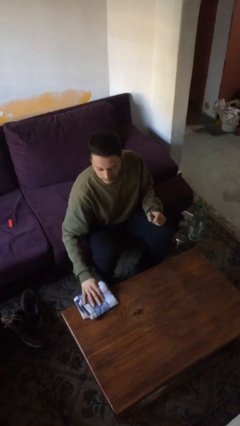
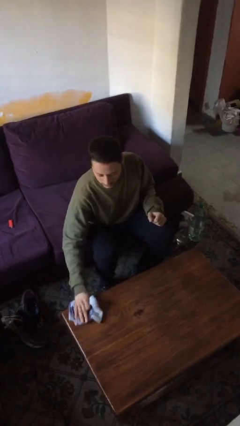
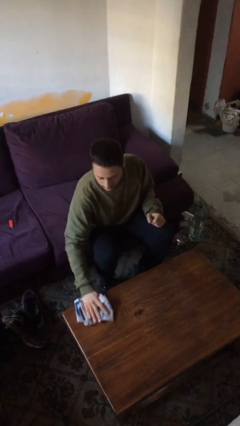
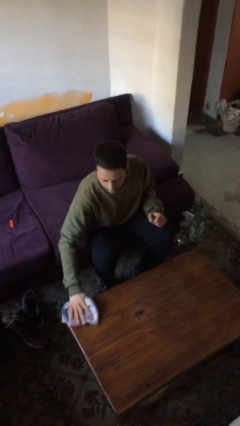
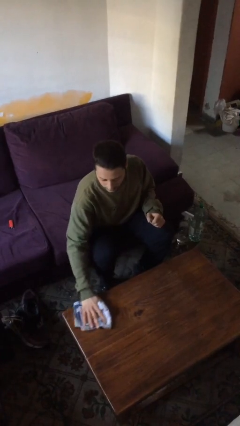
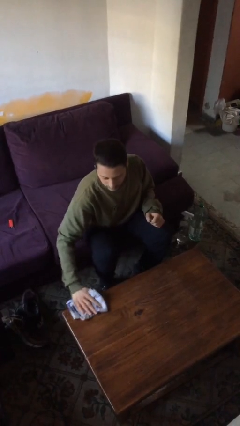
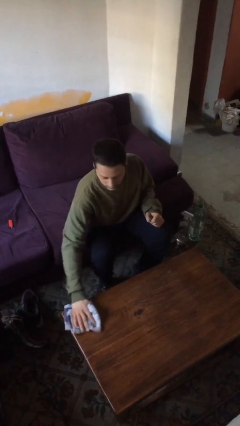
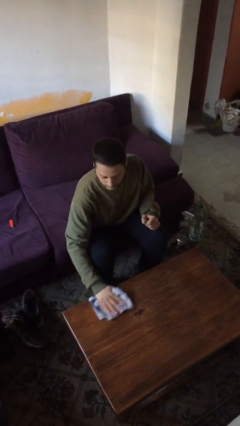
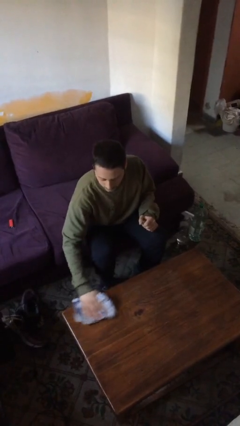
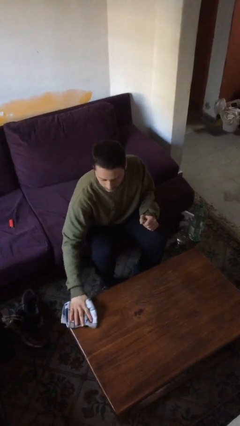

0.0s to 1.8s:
person cleans table with rag

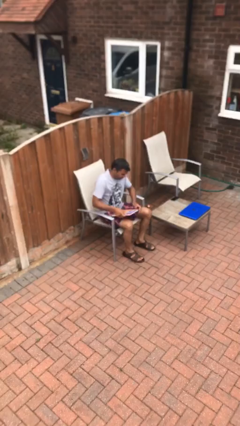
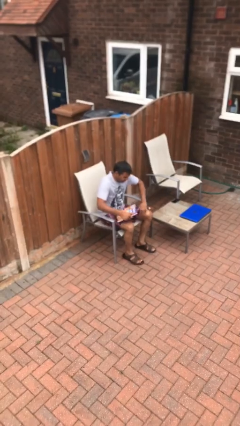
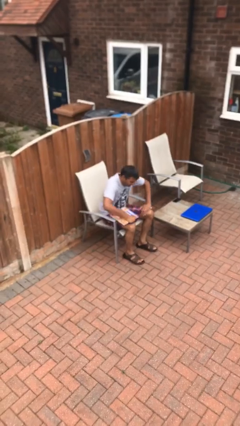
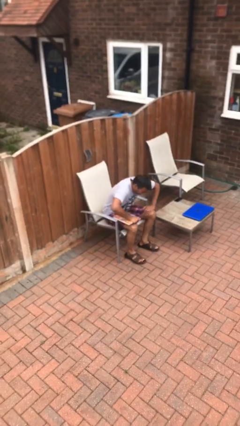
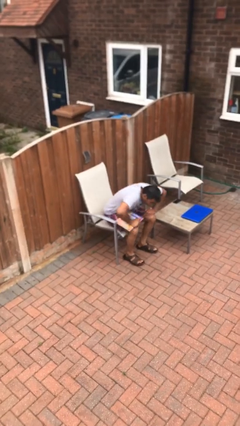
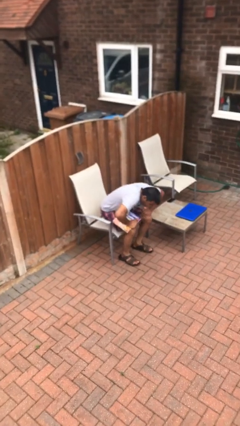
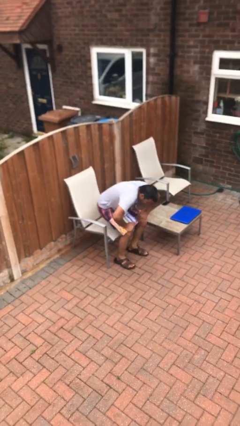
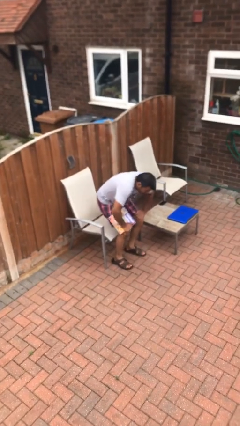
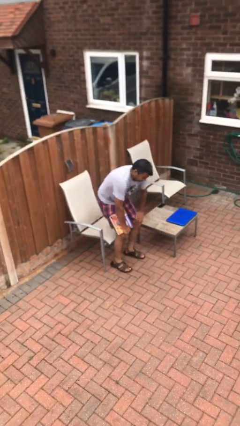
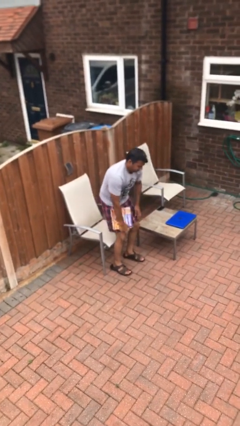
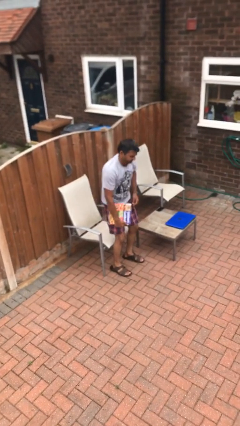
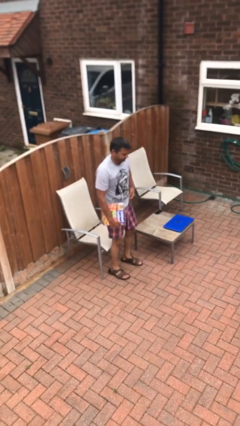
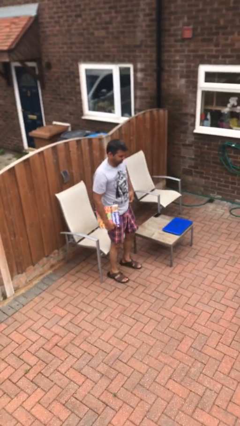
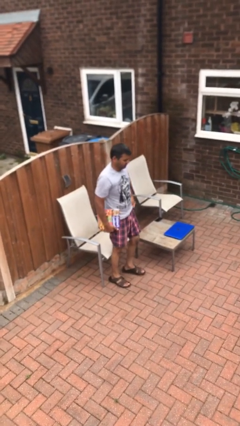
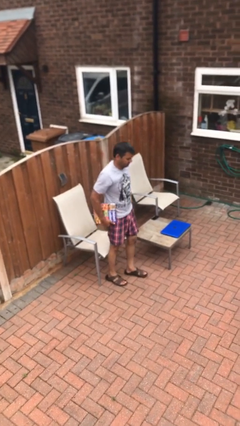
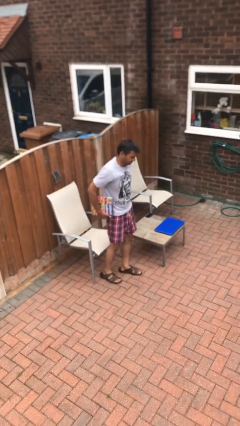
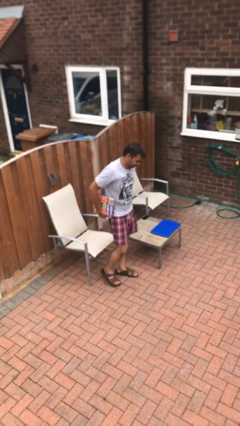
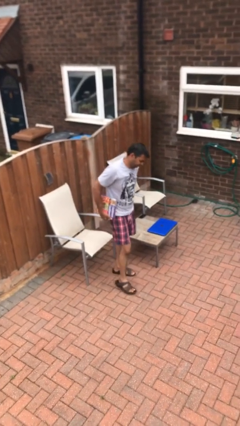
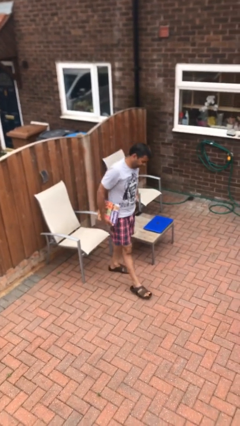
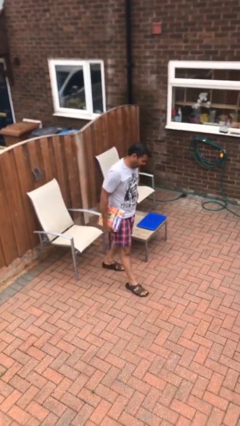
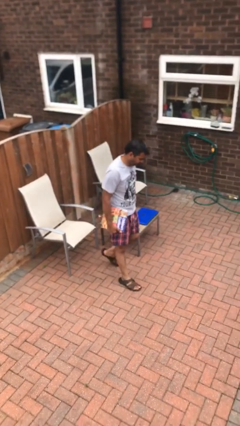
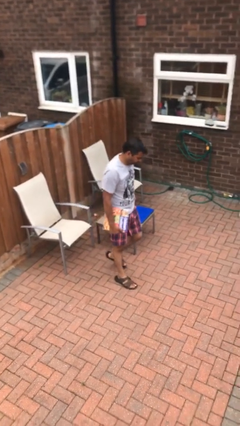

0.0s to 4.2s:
person stands up

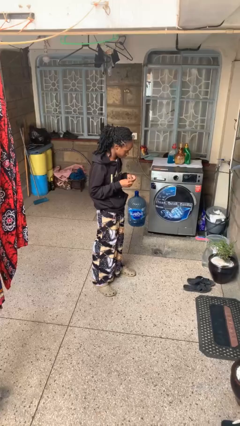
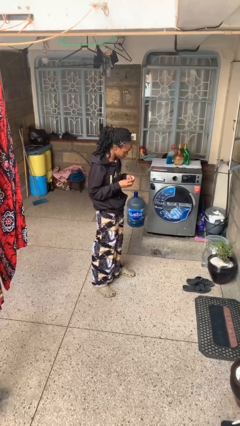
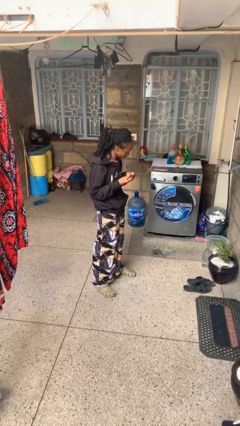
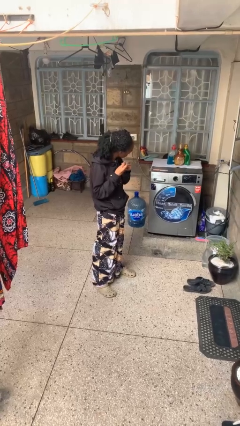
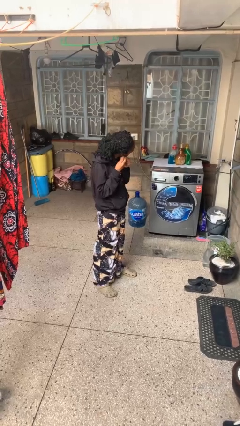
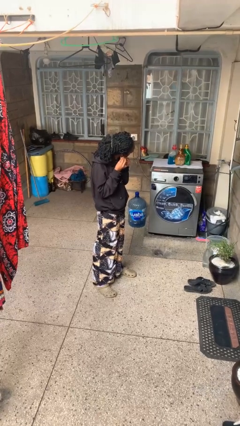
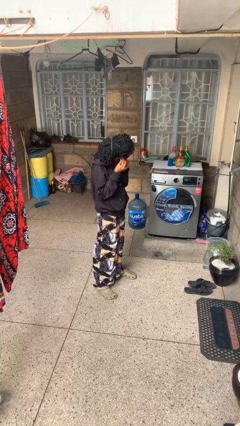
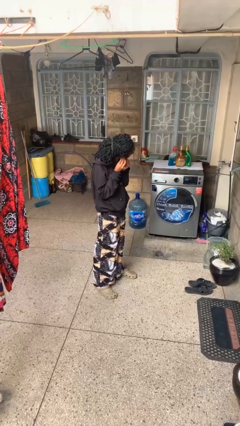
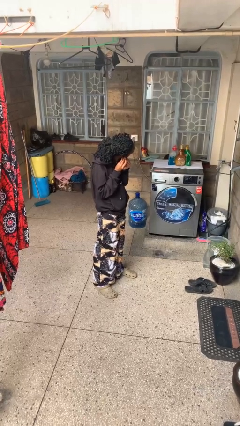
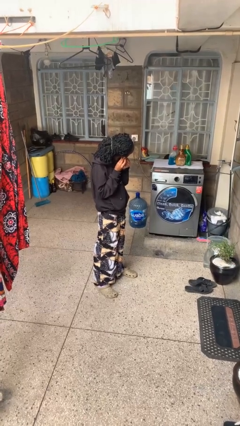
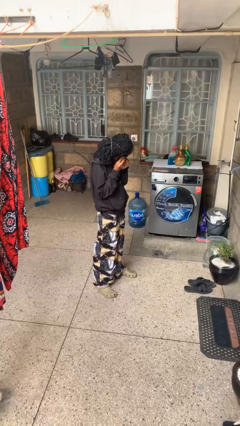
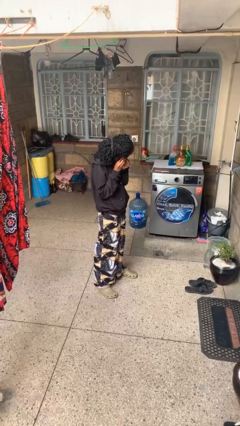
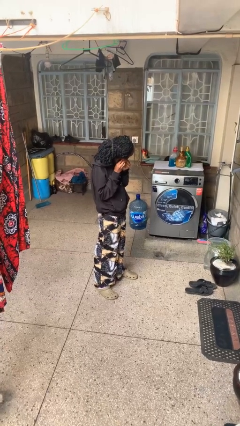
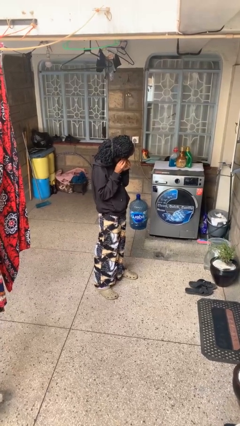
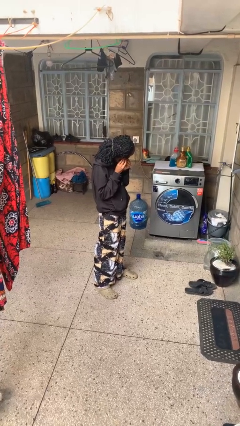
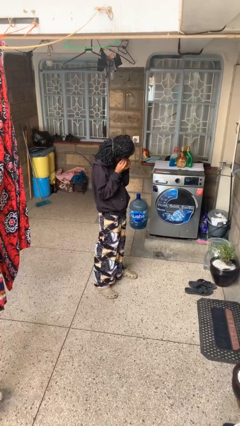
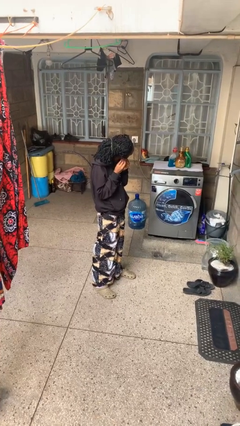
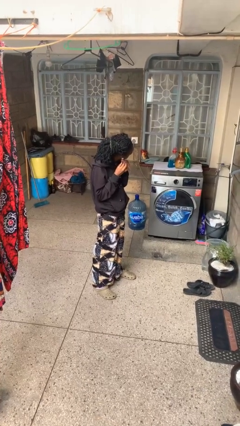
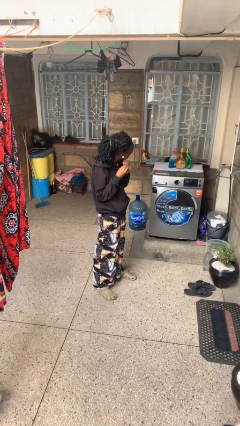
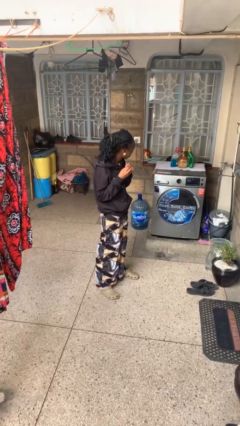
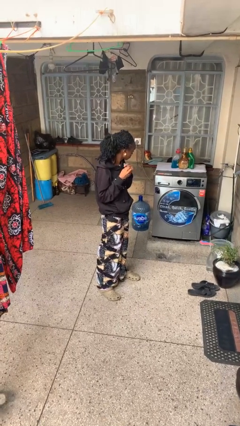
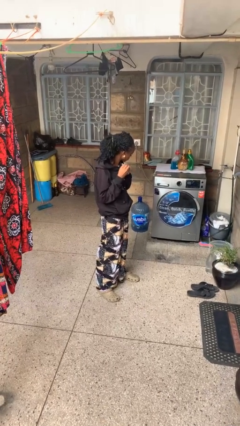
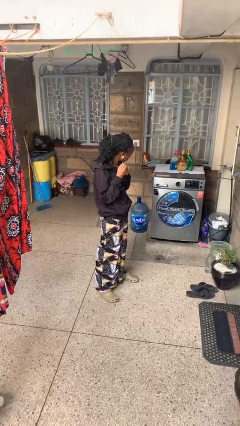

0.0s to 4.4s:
person puts on earrings

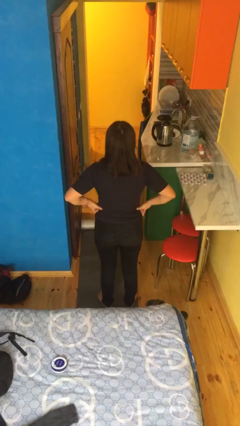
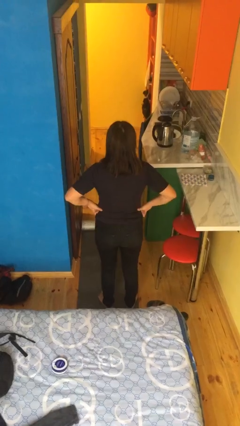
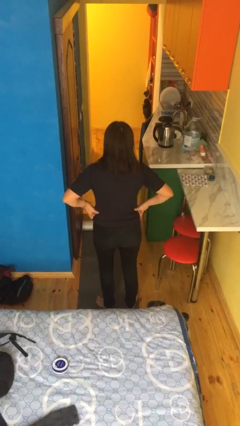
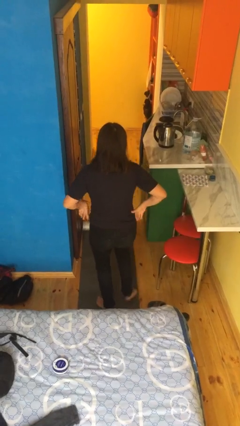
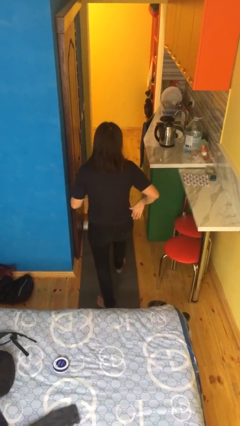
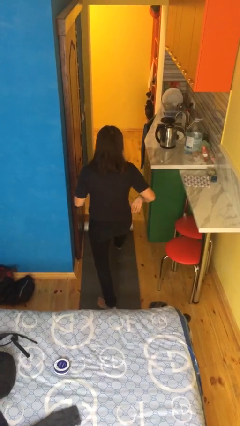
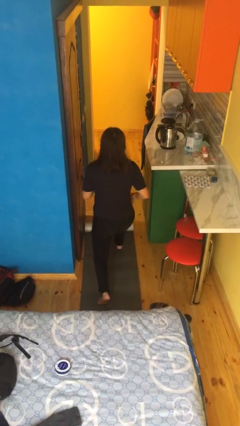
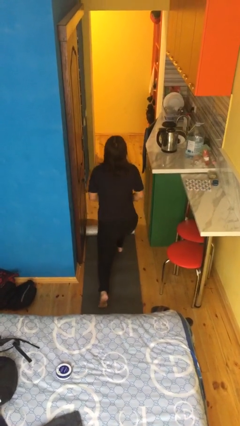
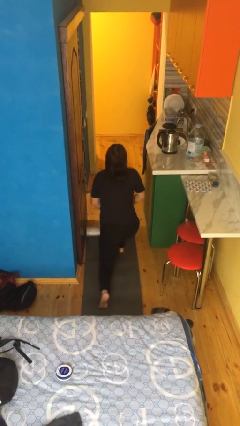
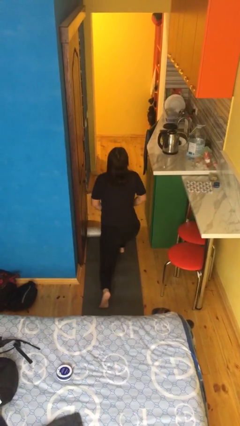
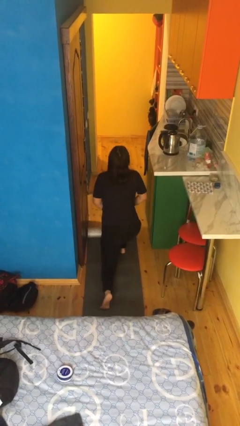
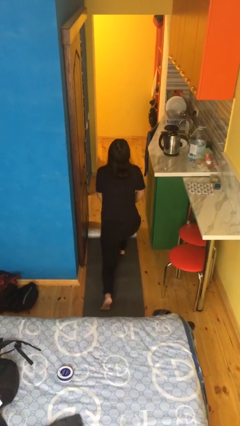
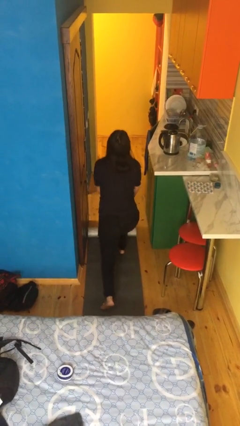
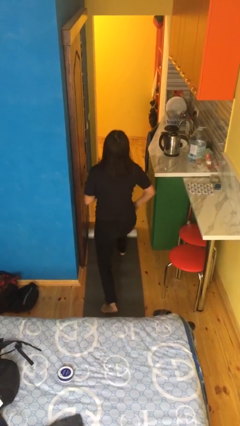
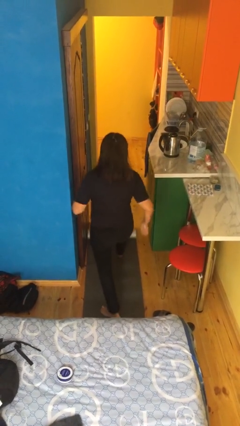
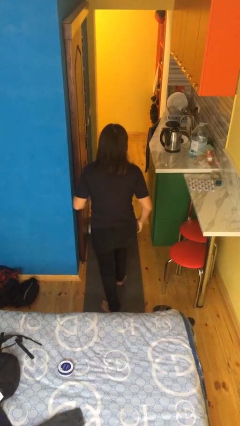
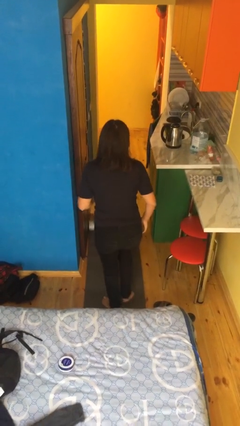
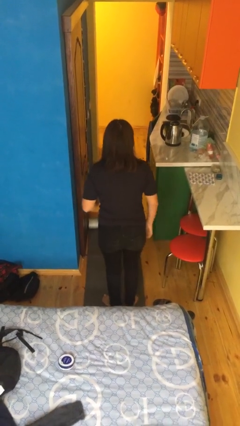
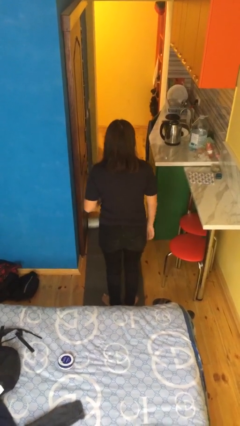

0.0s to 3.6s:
person exercises with lunges

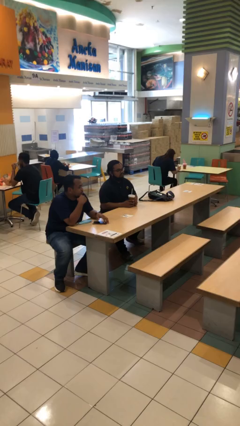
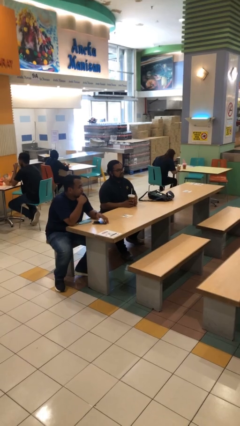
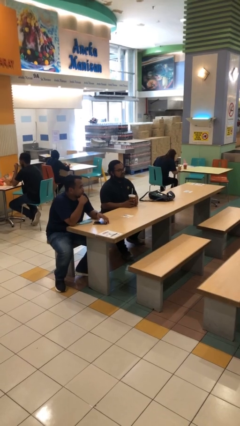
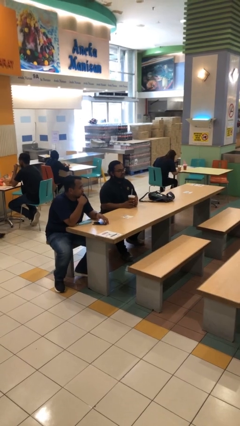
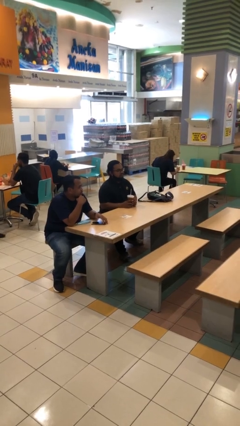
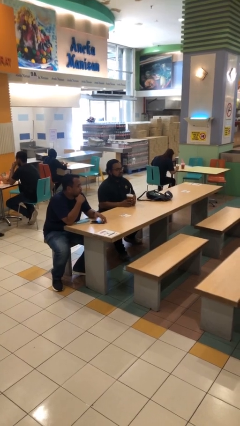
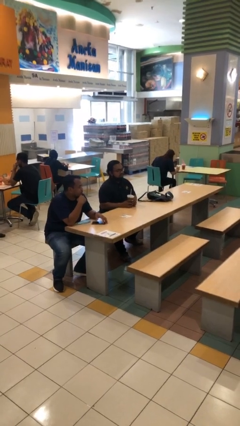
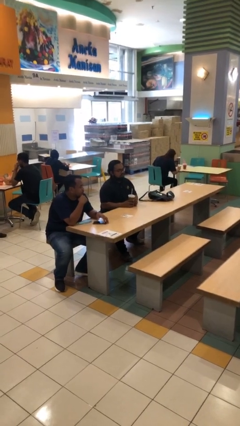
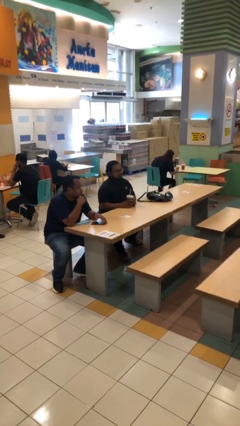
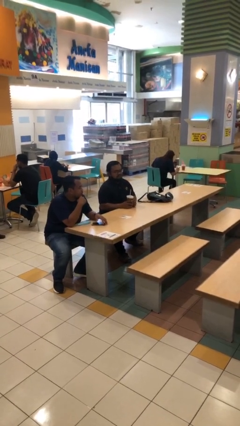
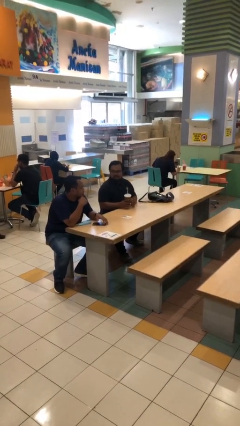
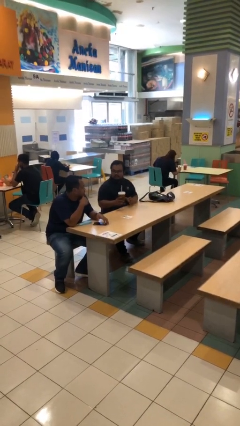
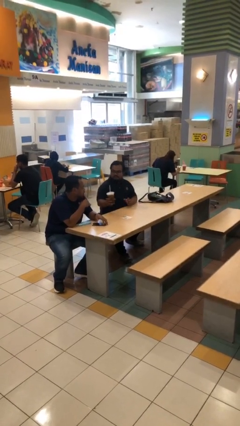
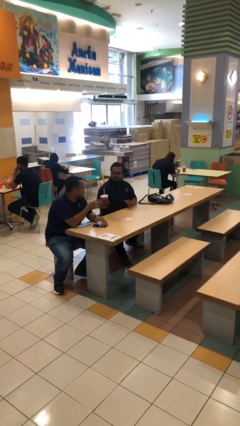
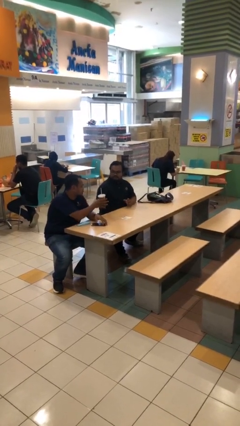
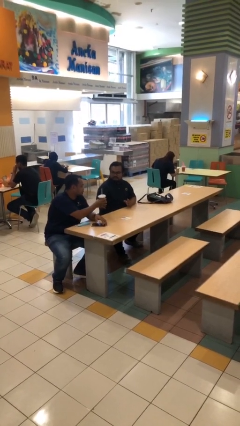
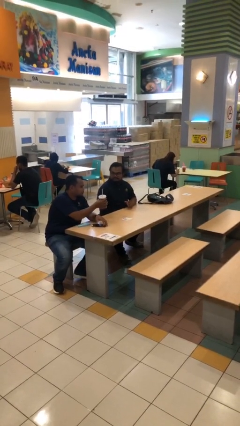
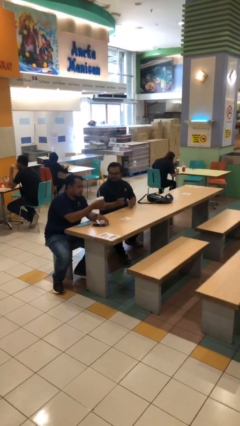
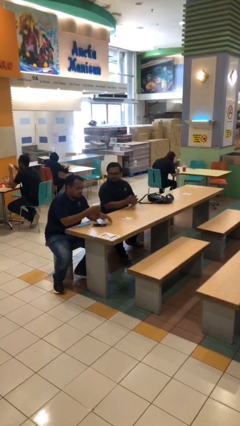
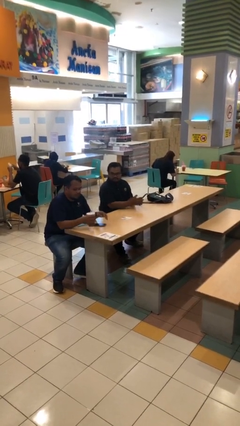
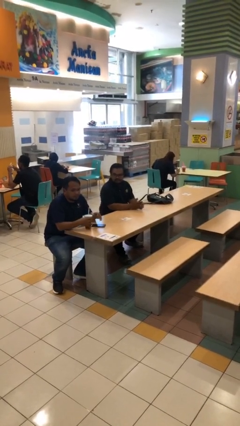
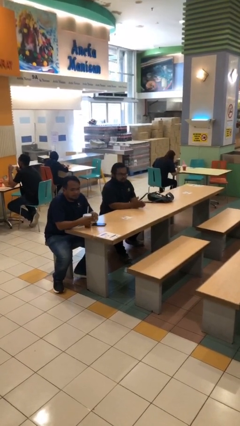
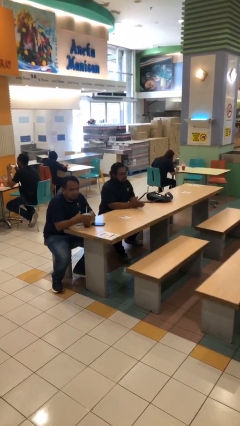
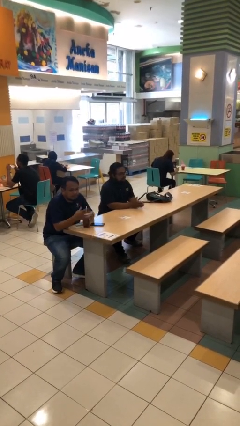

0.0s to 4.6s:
person transfers object to person
